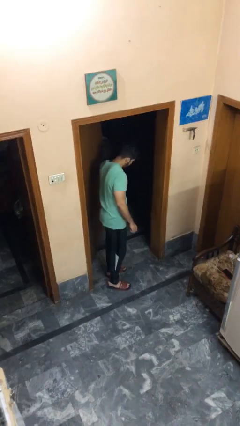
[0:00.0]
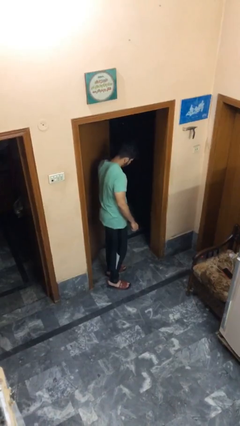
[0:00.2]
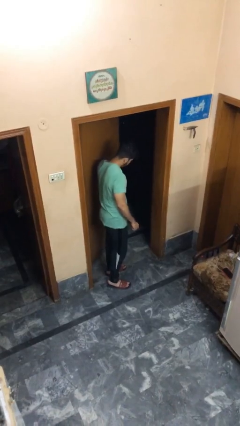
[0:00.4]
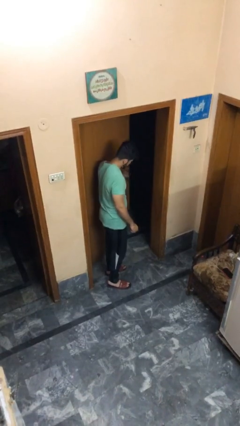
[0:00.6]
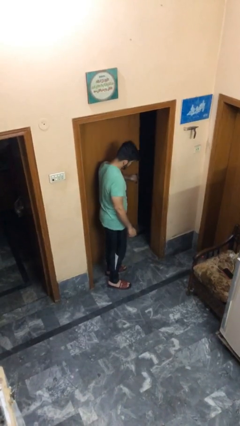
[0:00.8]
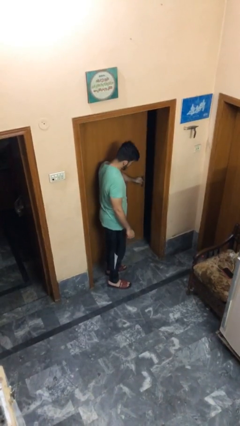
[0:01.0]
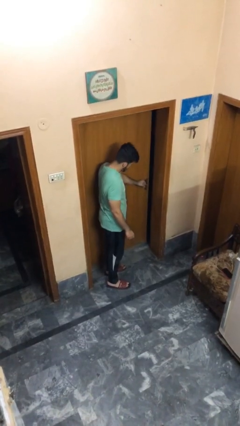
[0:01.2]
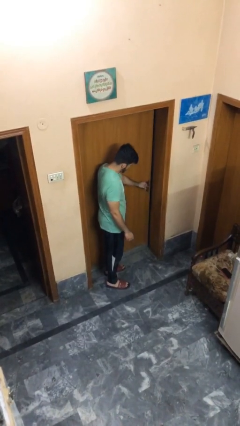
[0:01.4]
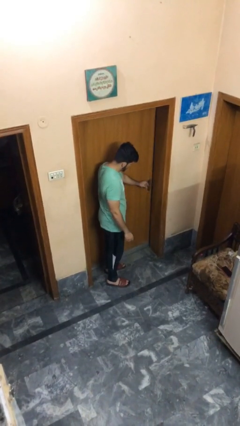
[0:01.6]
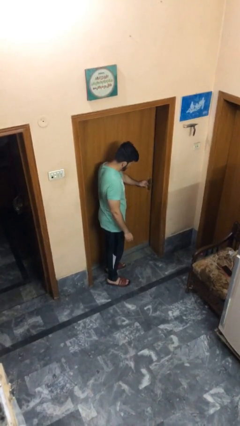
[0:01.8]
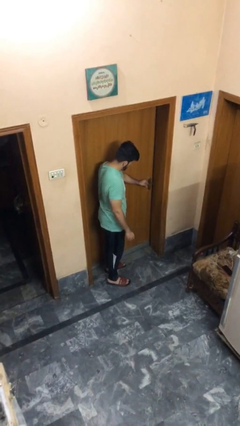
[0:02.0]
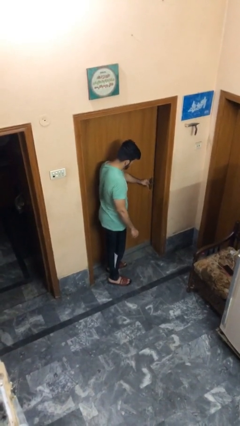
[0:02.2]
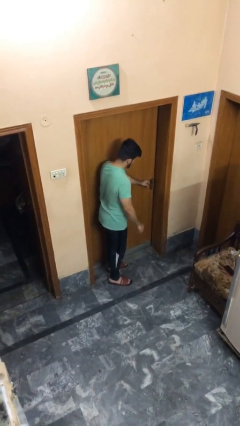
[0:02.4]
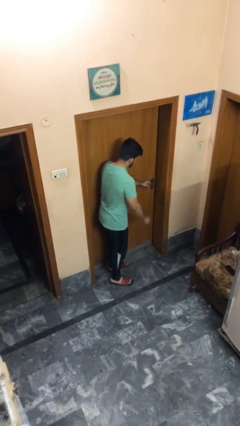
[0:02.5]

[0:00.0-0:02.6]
person closes facility door

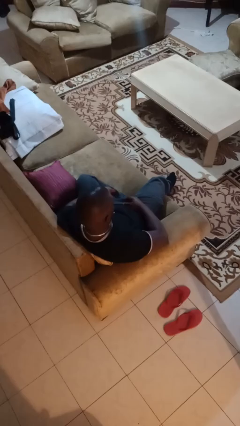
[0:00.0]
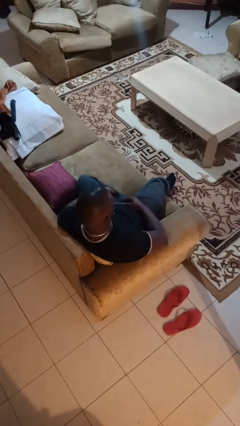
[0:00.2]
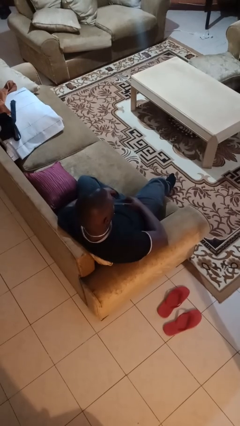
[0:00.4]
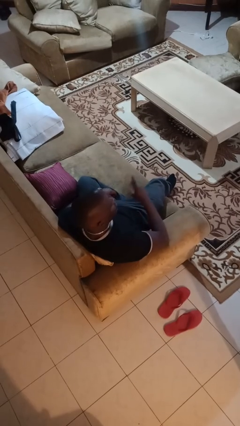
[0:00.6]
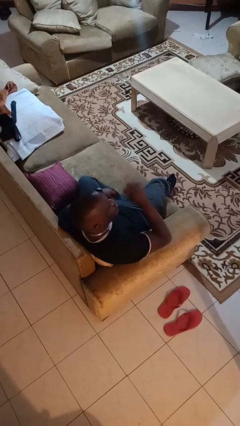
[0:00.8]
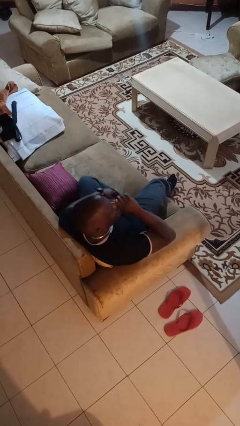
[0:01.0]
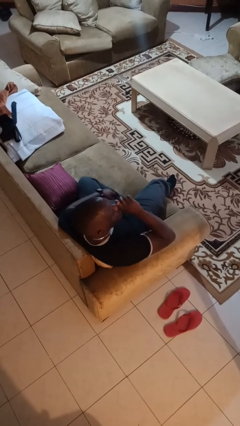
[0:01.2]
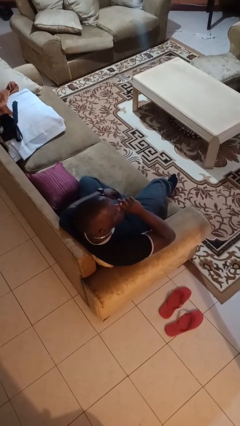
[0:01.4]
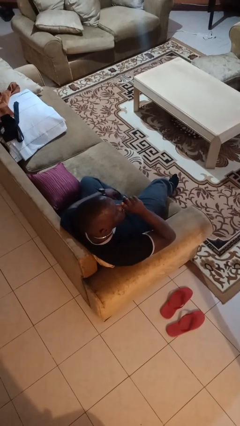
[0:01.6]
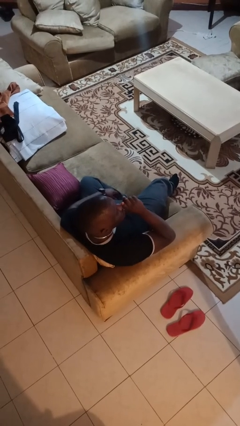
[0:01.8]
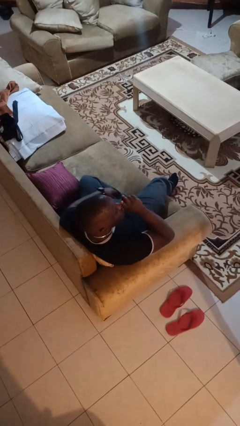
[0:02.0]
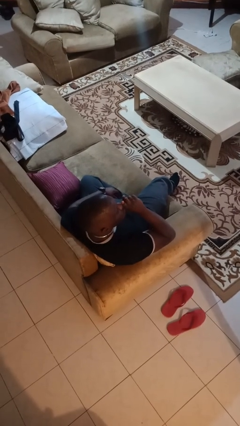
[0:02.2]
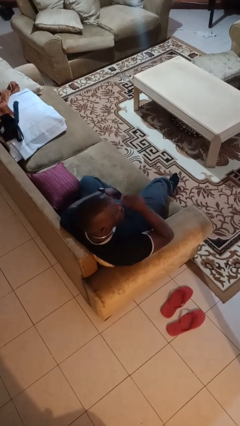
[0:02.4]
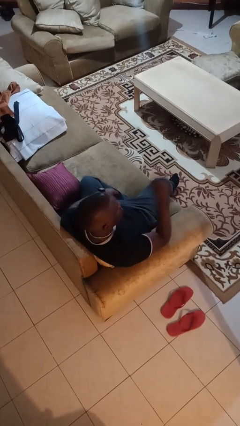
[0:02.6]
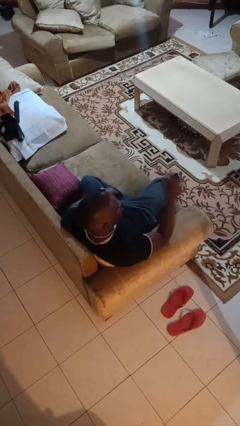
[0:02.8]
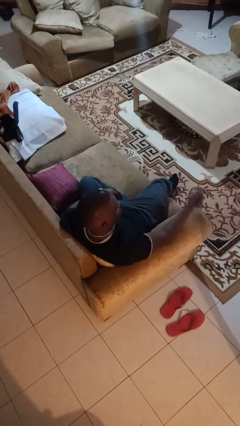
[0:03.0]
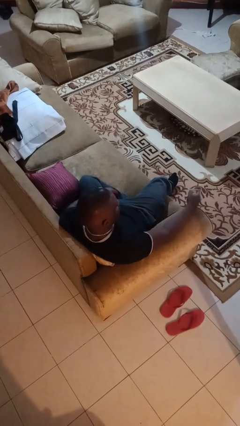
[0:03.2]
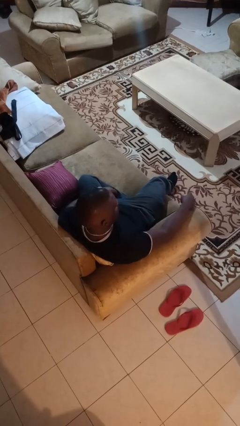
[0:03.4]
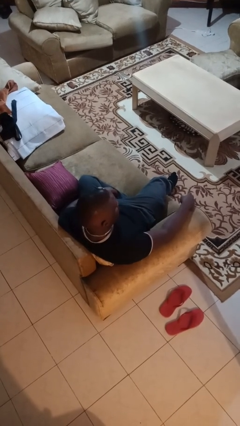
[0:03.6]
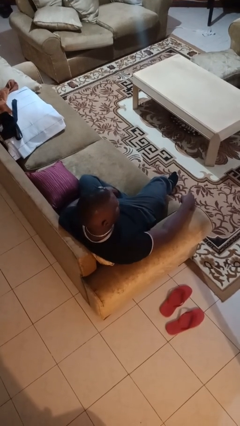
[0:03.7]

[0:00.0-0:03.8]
person gestures be quiet

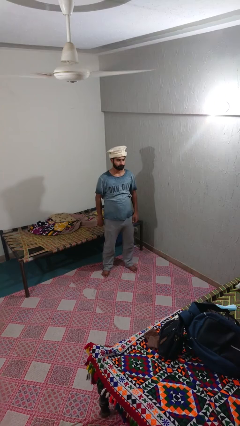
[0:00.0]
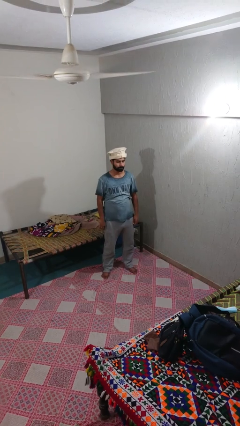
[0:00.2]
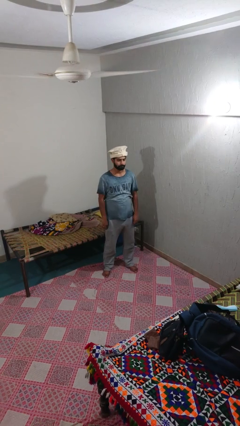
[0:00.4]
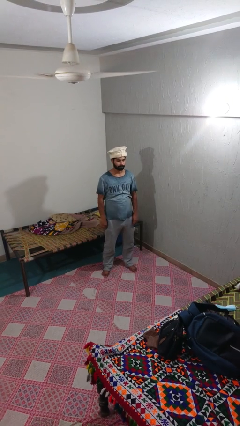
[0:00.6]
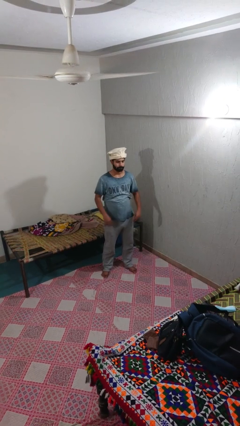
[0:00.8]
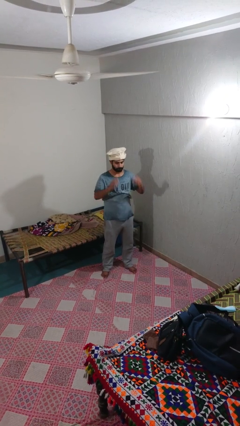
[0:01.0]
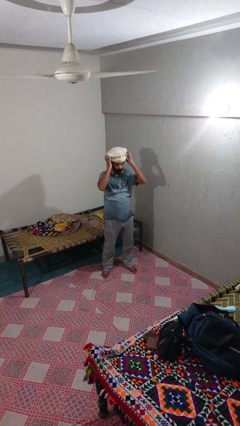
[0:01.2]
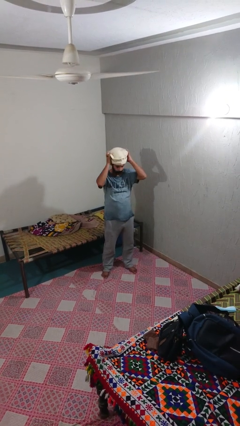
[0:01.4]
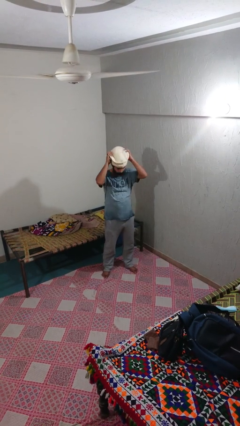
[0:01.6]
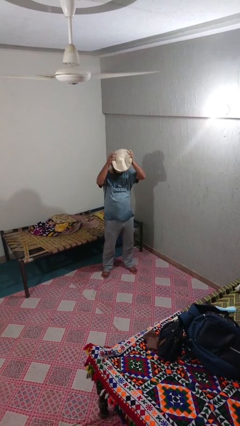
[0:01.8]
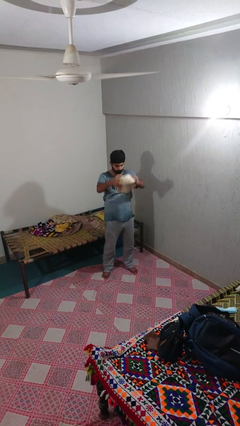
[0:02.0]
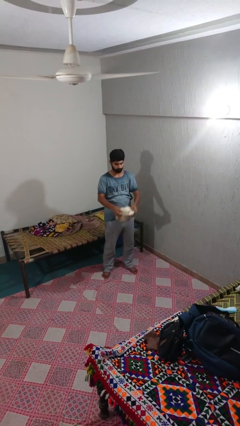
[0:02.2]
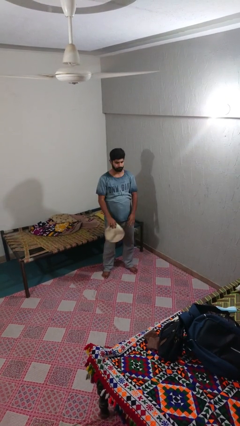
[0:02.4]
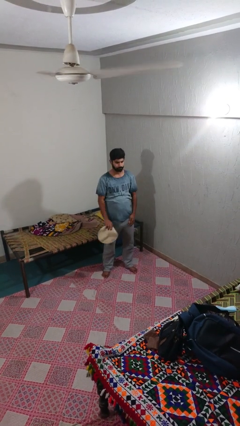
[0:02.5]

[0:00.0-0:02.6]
person takes off hat

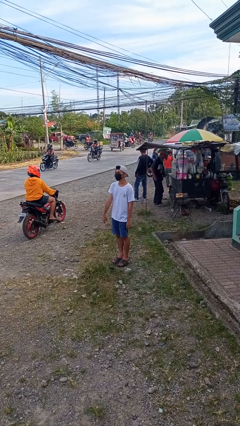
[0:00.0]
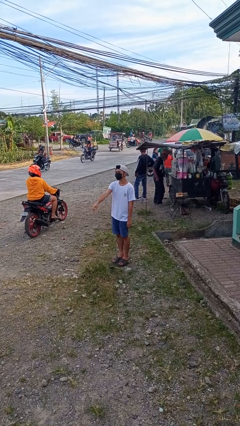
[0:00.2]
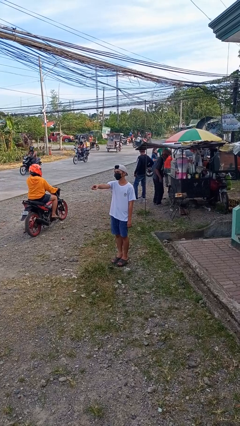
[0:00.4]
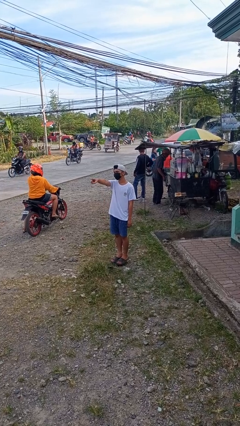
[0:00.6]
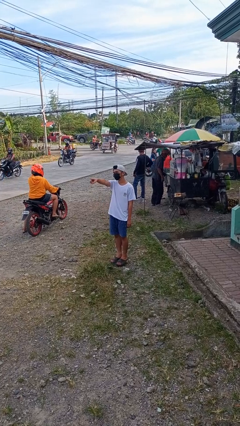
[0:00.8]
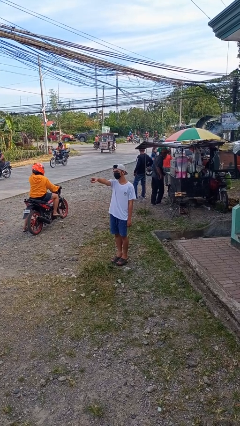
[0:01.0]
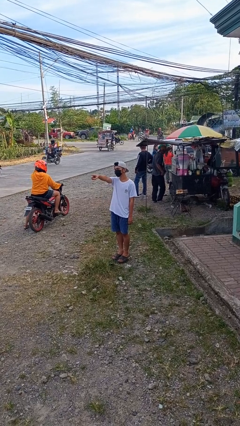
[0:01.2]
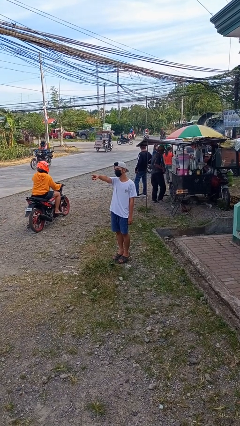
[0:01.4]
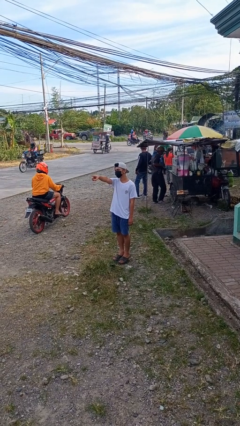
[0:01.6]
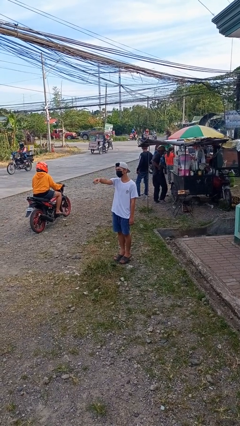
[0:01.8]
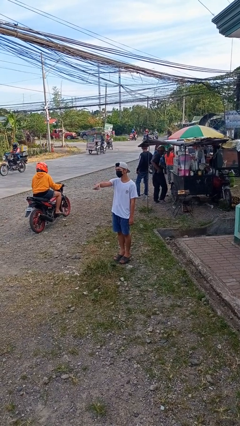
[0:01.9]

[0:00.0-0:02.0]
person points at person

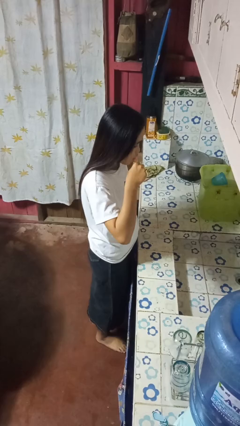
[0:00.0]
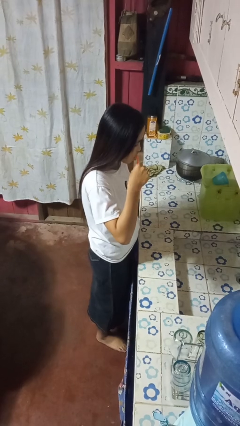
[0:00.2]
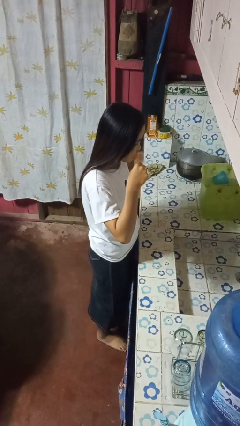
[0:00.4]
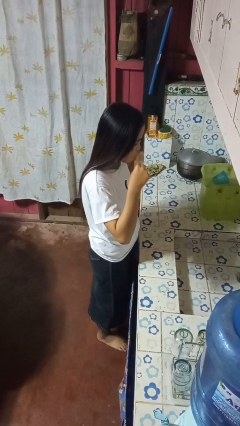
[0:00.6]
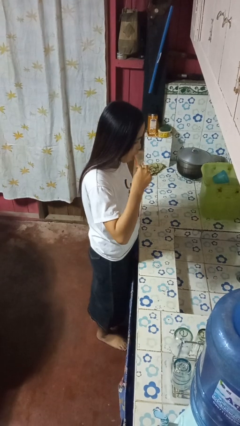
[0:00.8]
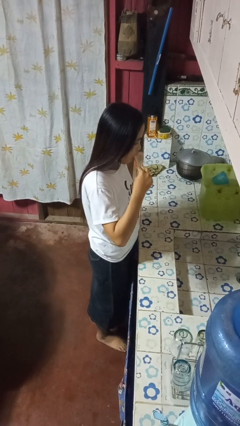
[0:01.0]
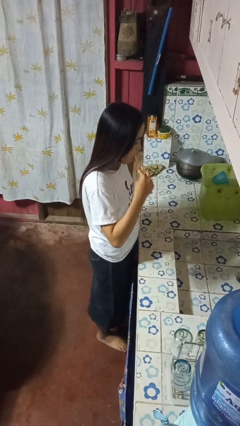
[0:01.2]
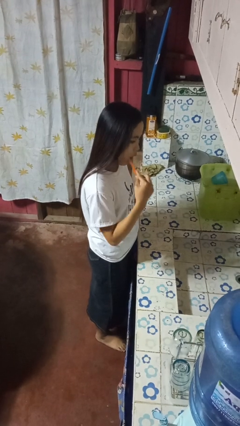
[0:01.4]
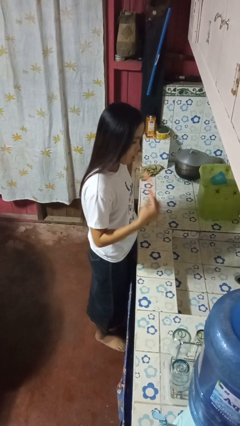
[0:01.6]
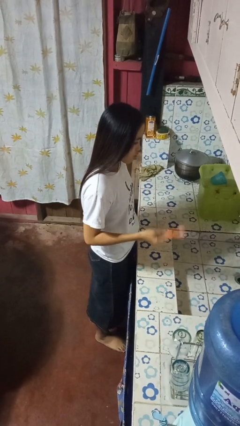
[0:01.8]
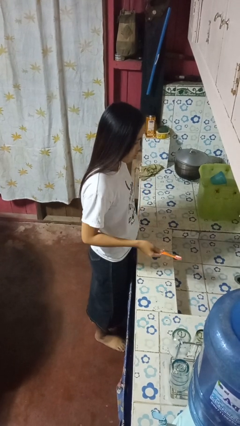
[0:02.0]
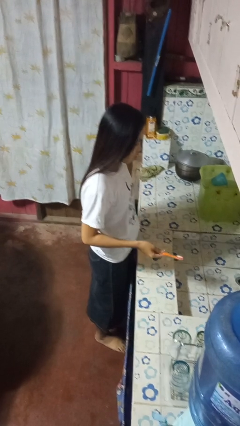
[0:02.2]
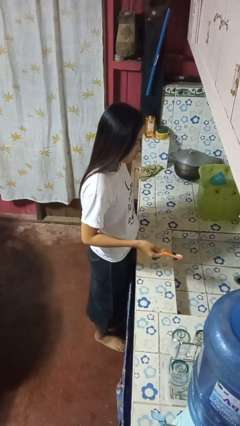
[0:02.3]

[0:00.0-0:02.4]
person brushes teeth

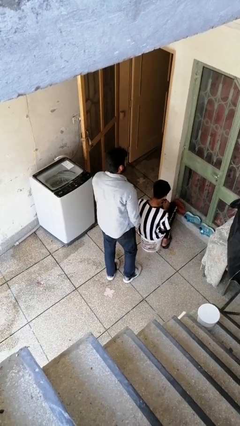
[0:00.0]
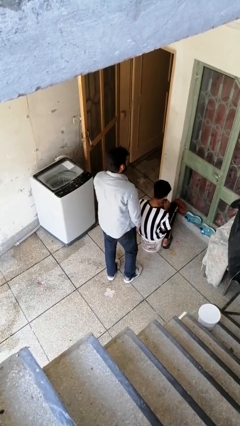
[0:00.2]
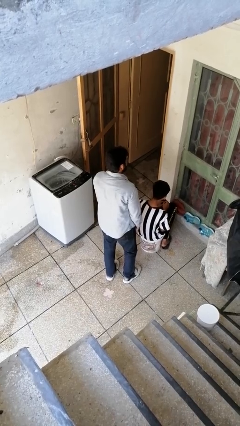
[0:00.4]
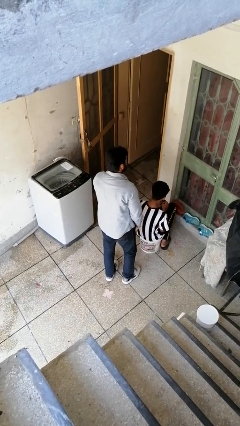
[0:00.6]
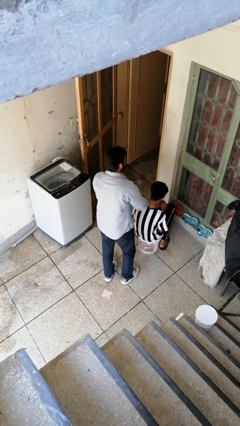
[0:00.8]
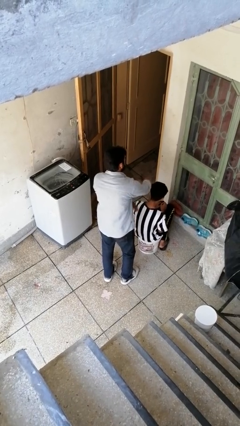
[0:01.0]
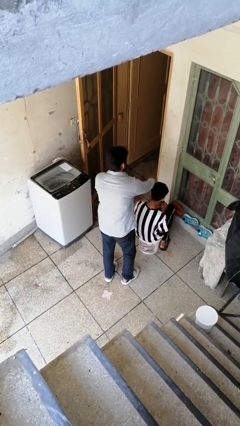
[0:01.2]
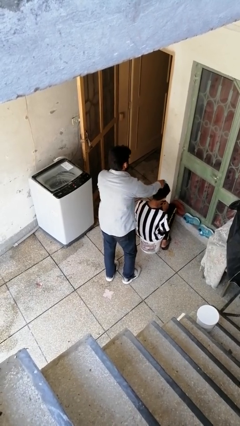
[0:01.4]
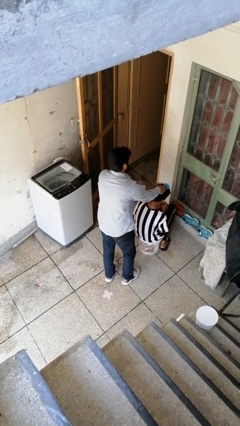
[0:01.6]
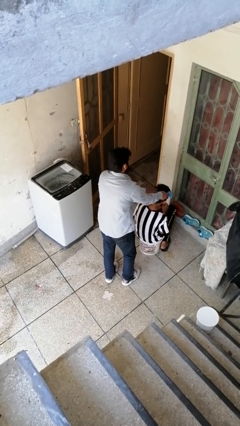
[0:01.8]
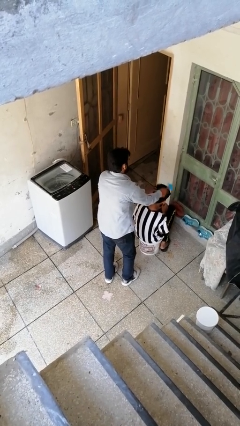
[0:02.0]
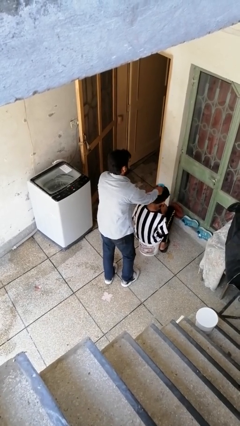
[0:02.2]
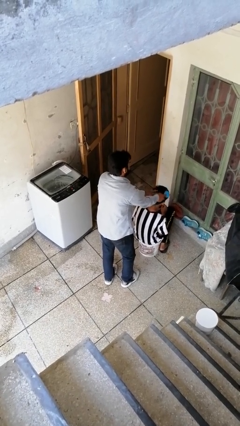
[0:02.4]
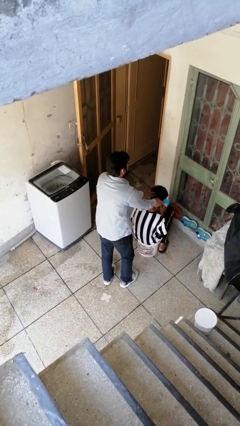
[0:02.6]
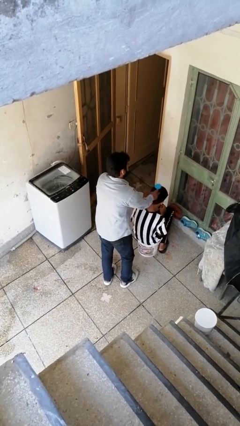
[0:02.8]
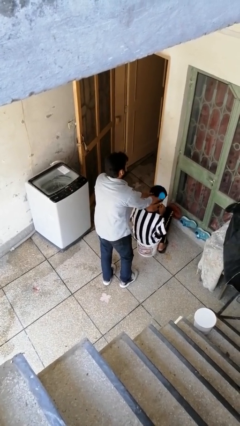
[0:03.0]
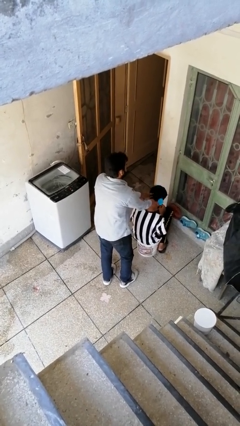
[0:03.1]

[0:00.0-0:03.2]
person brushes hair of person

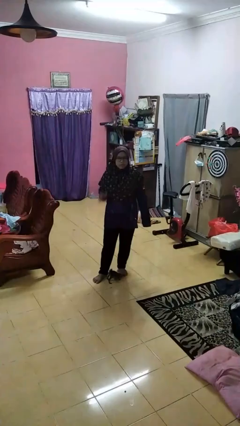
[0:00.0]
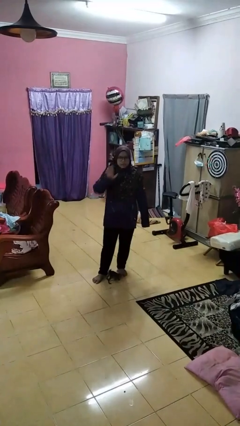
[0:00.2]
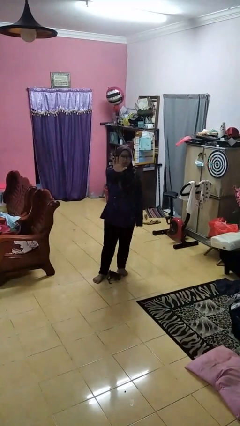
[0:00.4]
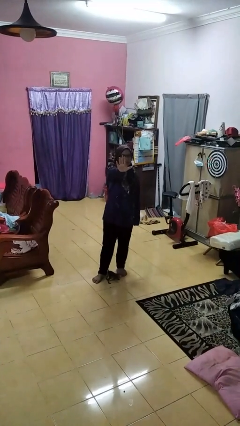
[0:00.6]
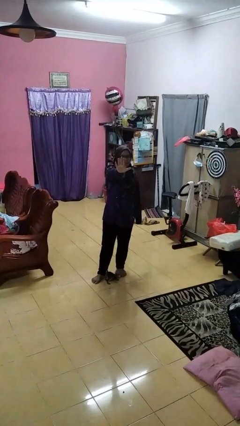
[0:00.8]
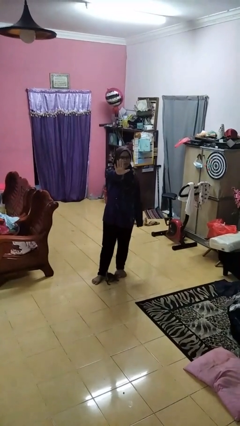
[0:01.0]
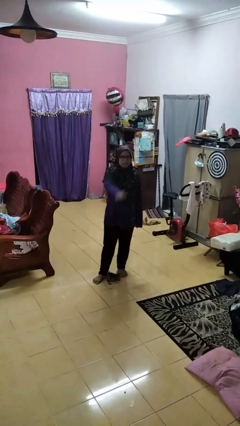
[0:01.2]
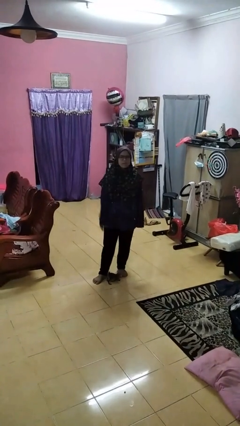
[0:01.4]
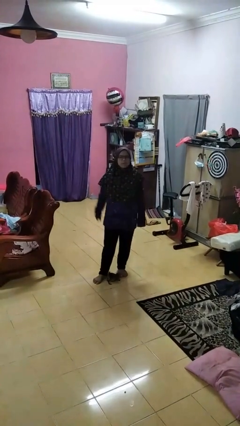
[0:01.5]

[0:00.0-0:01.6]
person gestures stop
